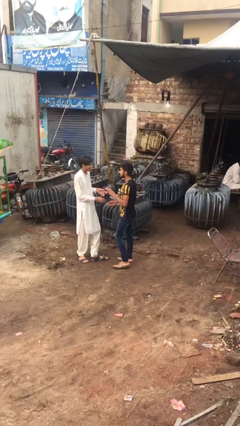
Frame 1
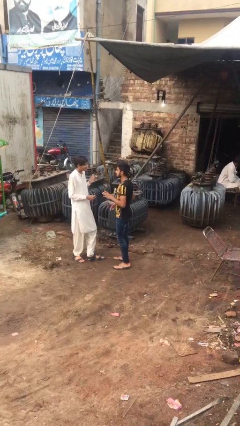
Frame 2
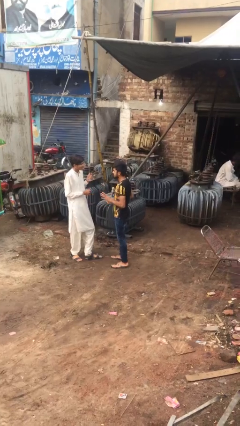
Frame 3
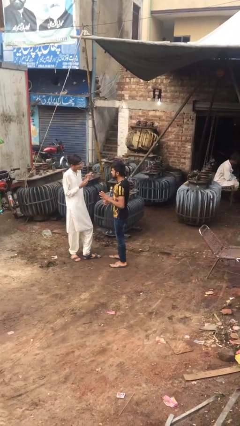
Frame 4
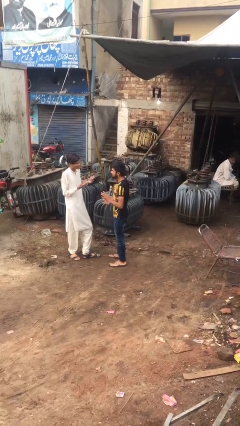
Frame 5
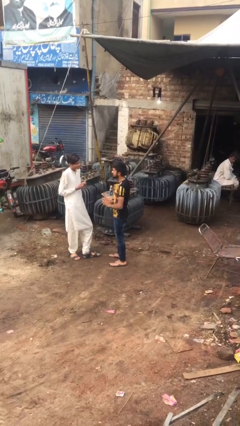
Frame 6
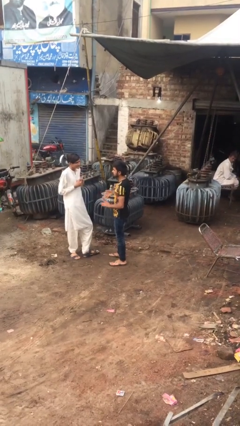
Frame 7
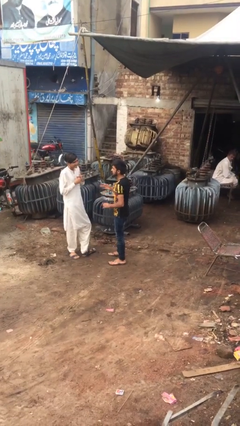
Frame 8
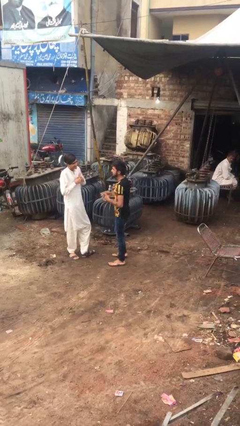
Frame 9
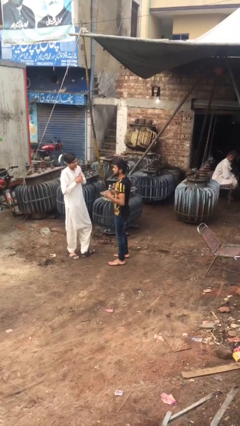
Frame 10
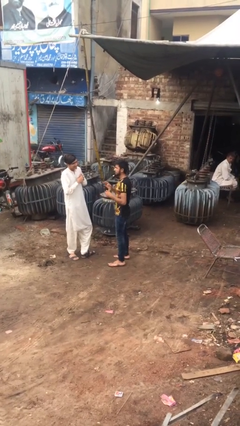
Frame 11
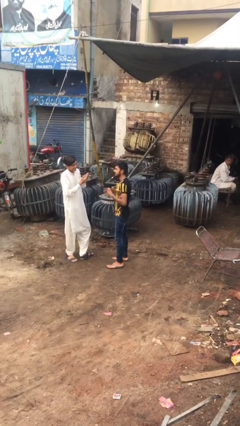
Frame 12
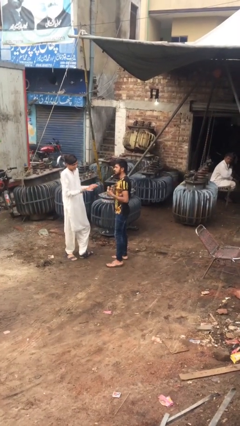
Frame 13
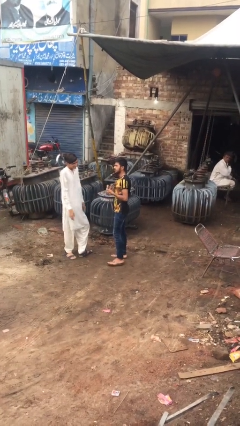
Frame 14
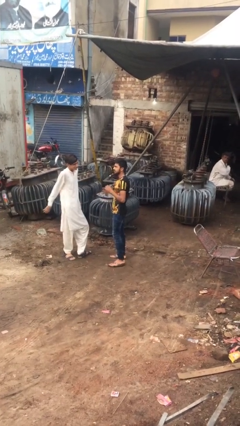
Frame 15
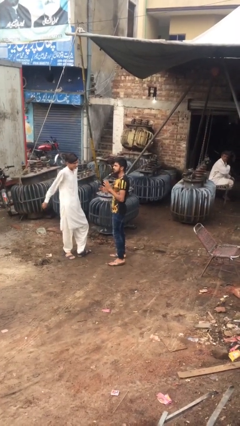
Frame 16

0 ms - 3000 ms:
person talks to person

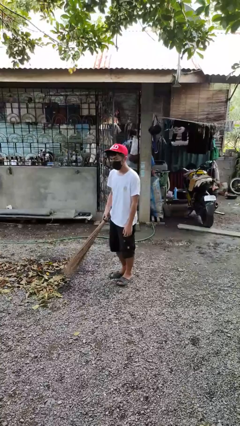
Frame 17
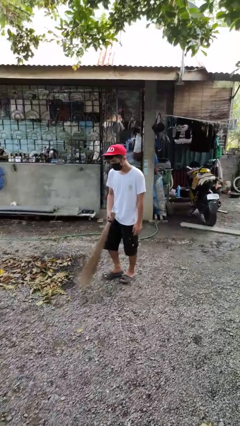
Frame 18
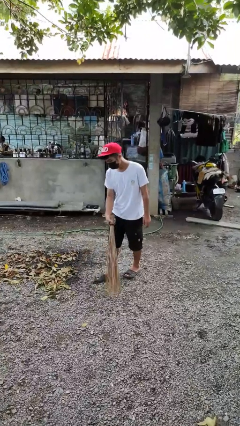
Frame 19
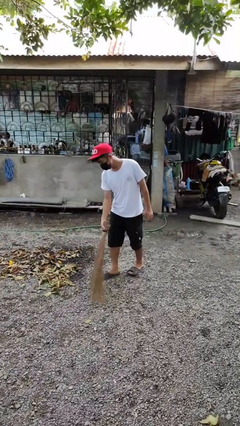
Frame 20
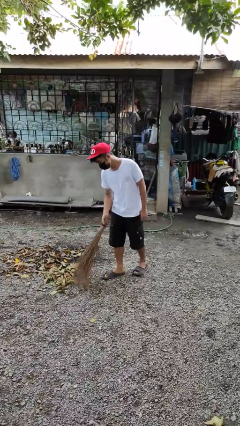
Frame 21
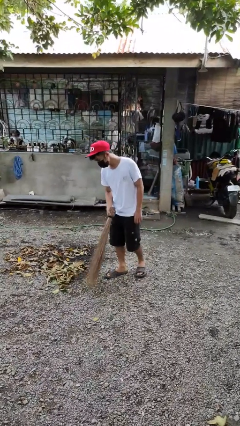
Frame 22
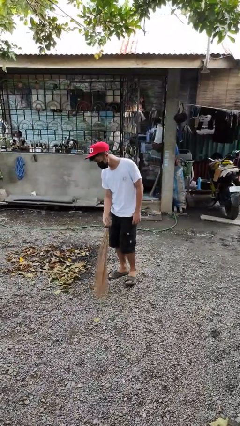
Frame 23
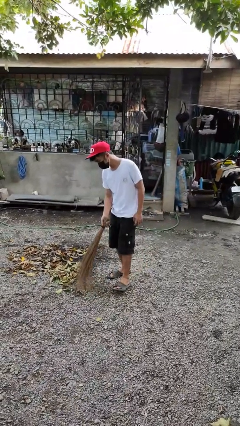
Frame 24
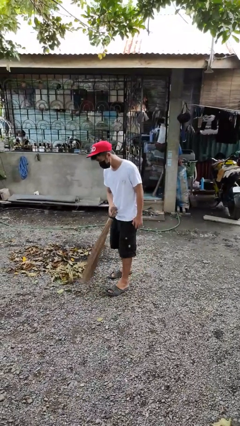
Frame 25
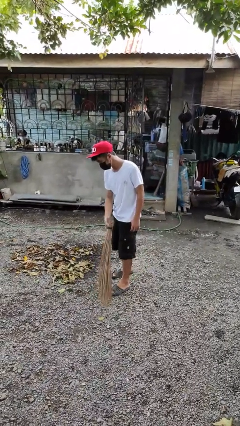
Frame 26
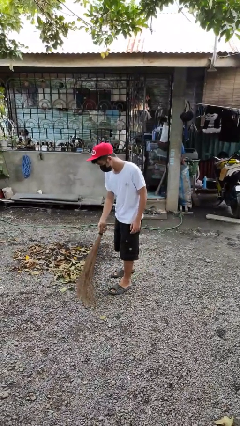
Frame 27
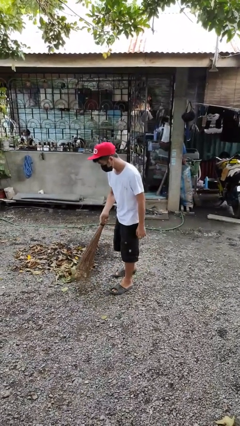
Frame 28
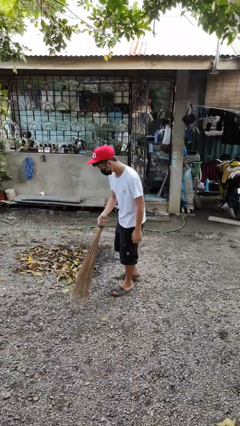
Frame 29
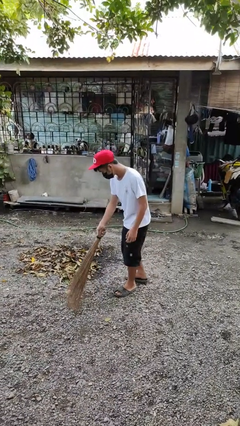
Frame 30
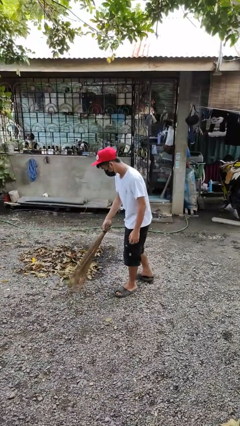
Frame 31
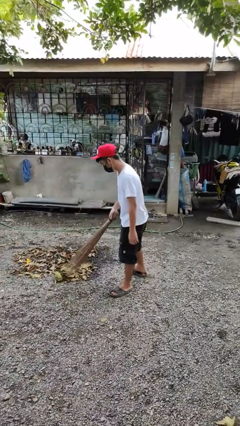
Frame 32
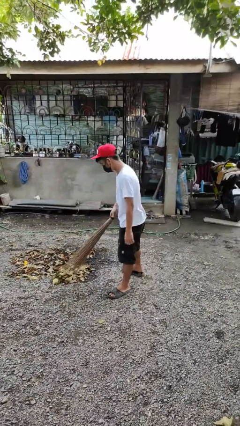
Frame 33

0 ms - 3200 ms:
person sweeps floor

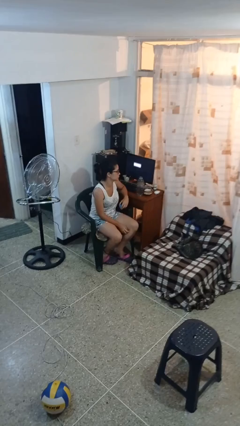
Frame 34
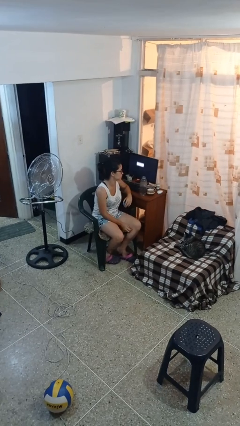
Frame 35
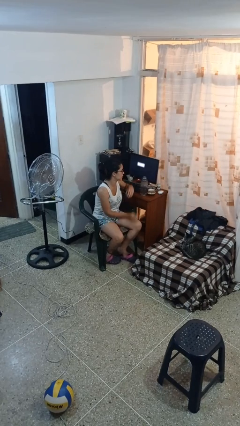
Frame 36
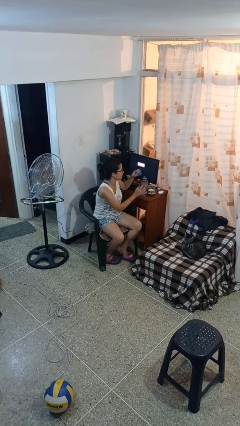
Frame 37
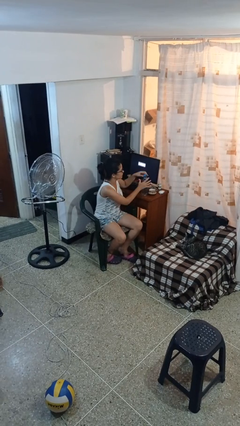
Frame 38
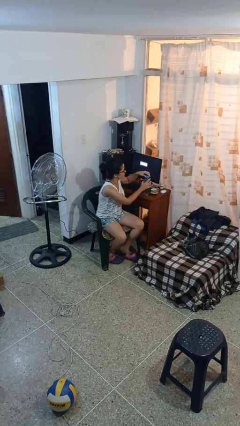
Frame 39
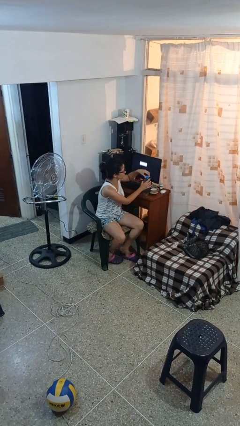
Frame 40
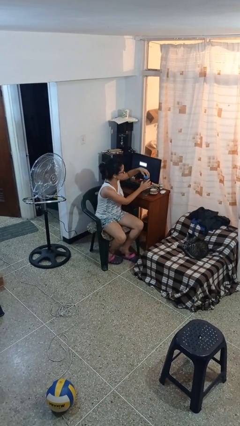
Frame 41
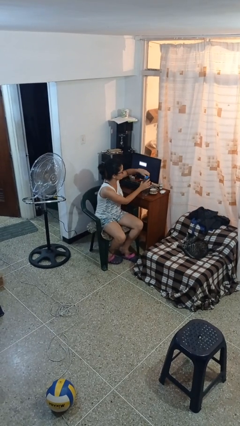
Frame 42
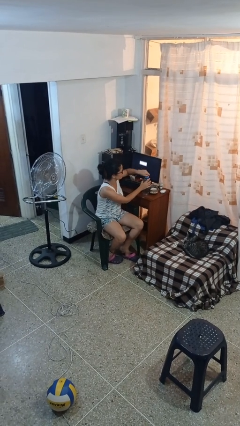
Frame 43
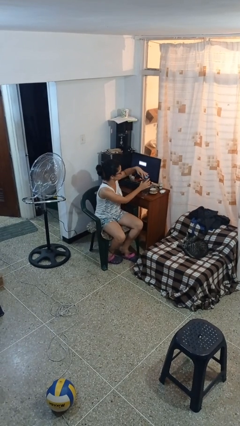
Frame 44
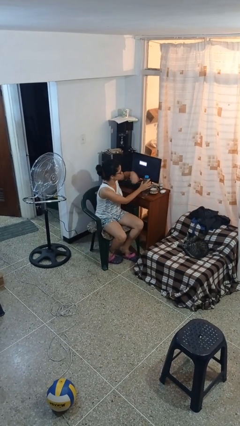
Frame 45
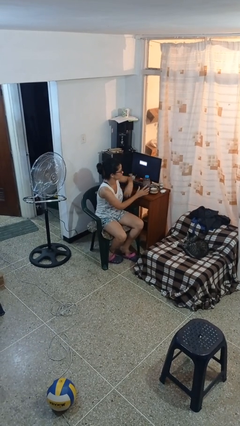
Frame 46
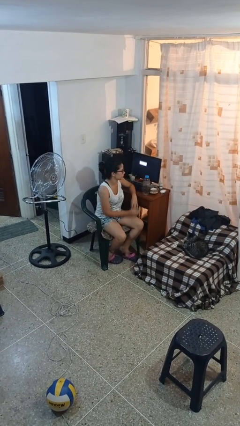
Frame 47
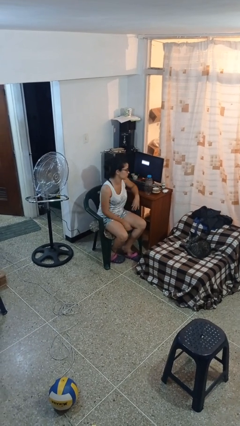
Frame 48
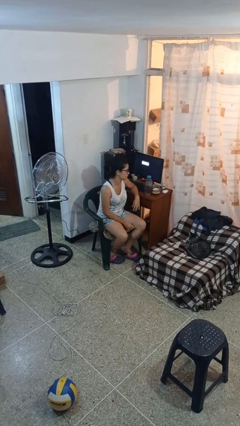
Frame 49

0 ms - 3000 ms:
person screws lid to bottle

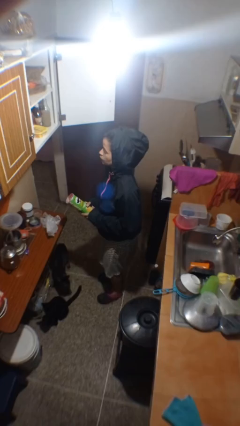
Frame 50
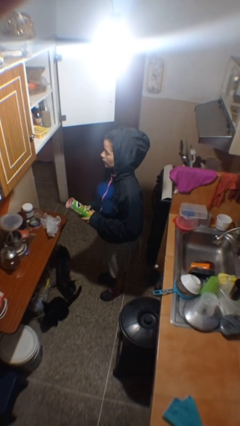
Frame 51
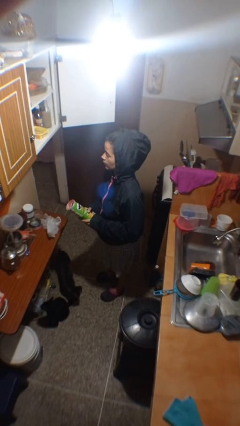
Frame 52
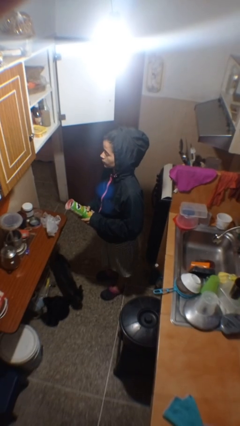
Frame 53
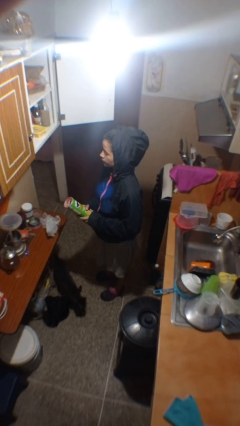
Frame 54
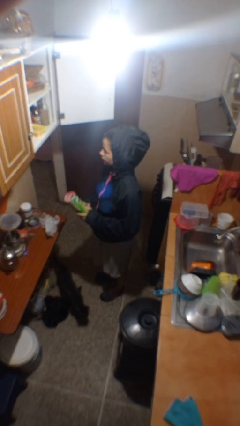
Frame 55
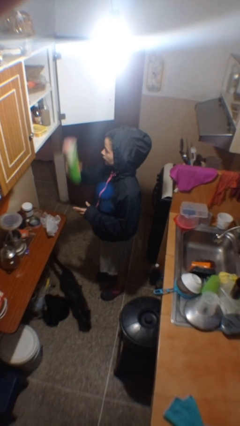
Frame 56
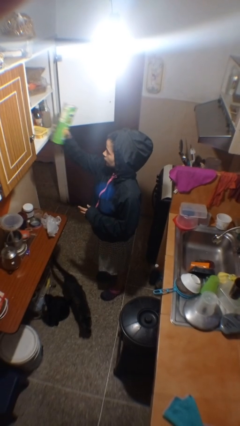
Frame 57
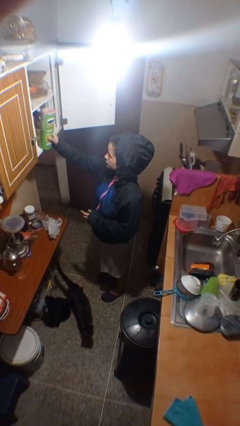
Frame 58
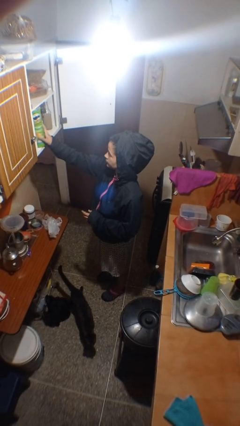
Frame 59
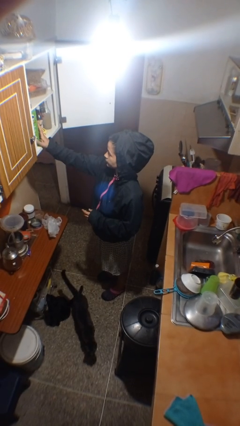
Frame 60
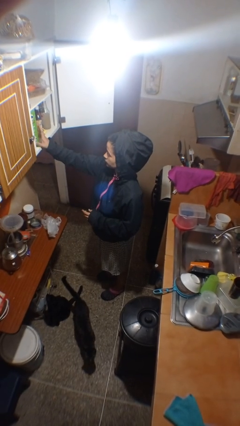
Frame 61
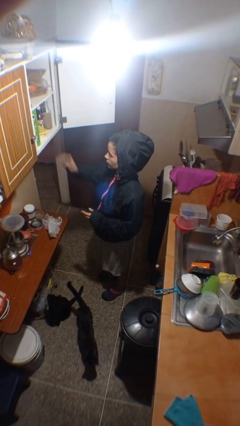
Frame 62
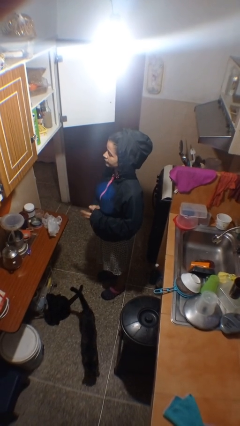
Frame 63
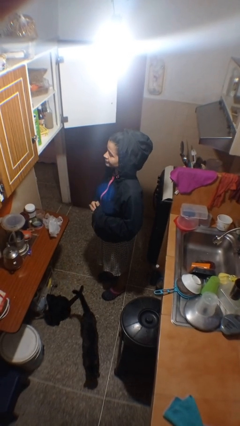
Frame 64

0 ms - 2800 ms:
person puts object in cabinet

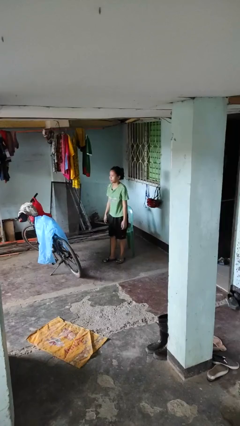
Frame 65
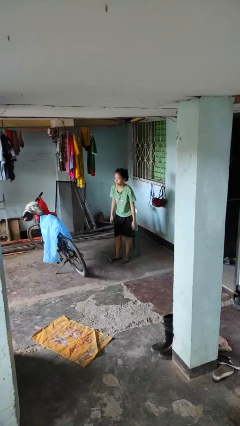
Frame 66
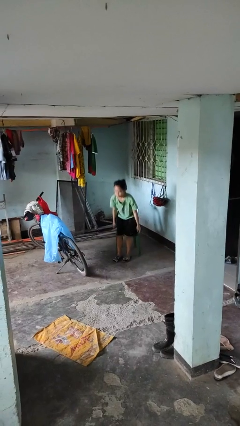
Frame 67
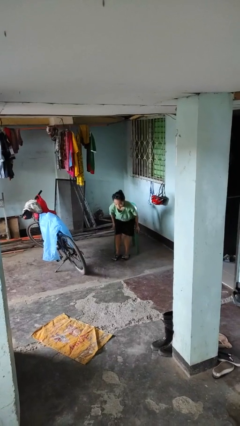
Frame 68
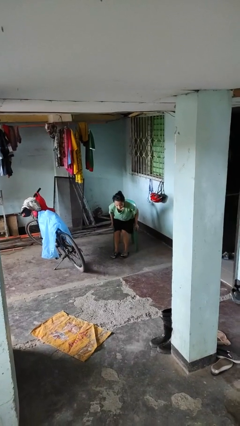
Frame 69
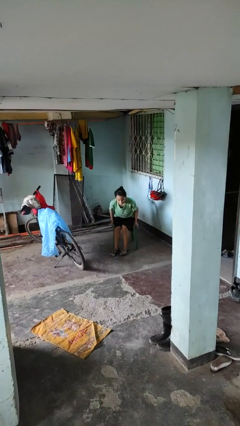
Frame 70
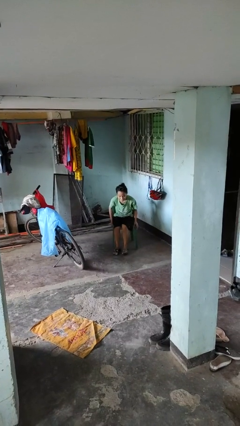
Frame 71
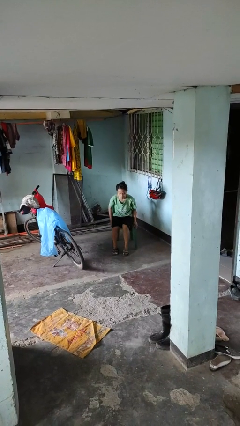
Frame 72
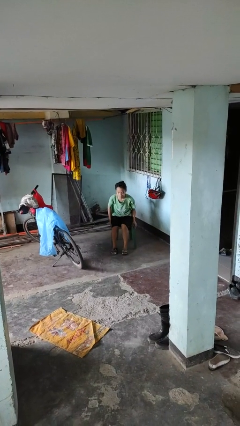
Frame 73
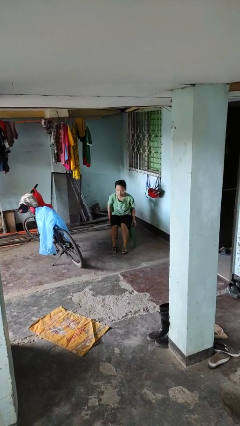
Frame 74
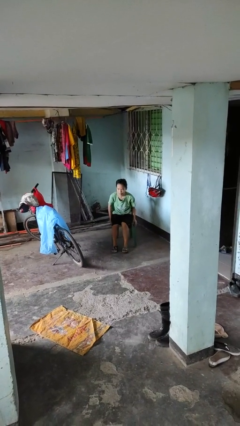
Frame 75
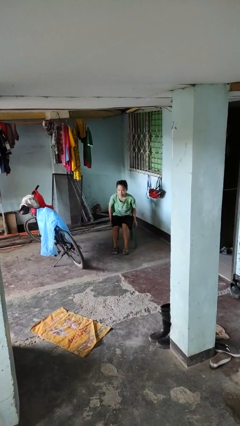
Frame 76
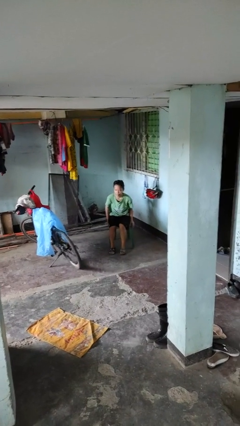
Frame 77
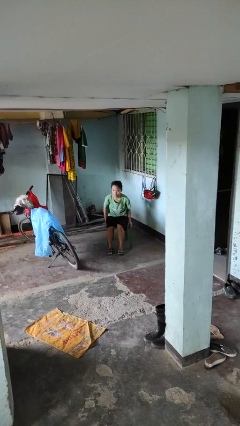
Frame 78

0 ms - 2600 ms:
person sits down

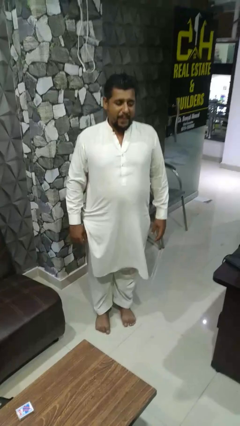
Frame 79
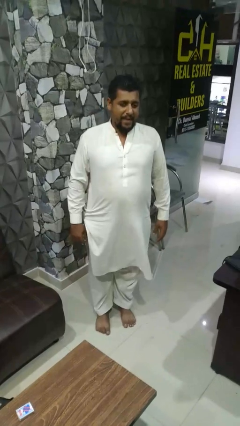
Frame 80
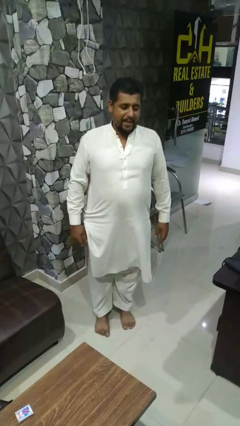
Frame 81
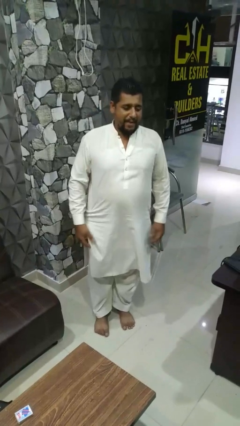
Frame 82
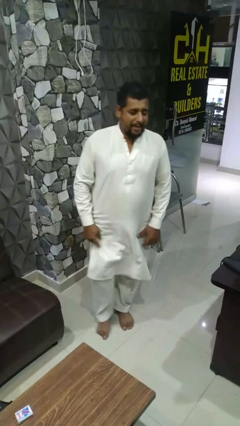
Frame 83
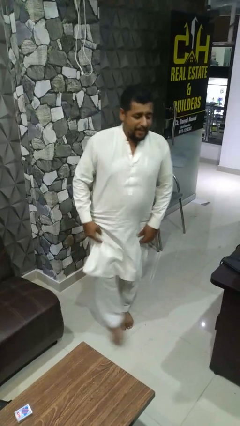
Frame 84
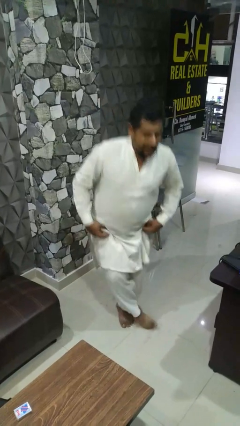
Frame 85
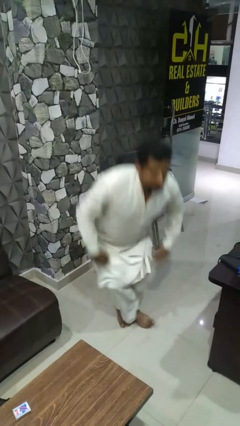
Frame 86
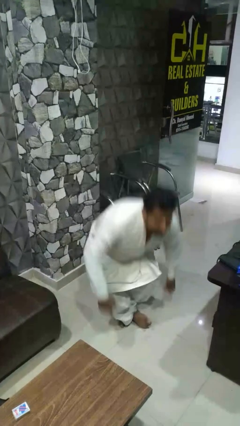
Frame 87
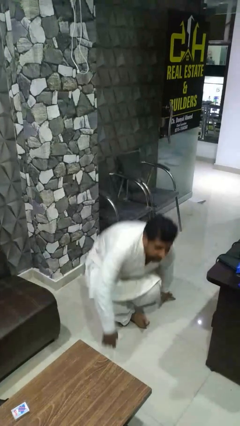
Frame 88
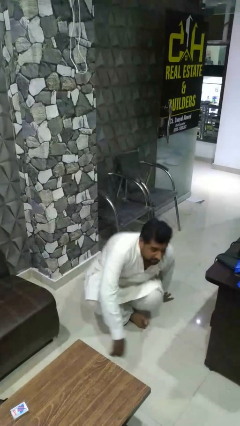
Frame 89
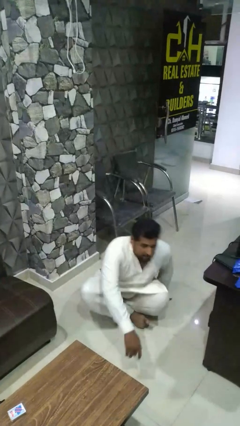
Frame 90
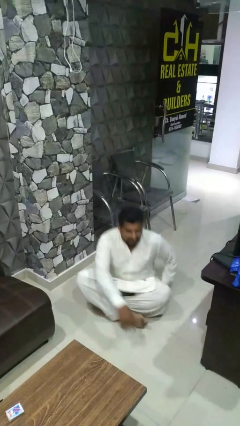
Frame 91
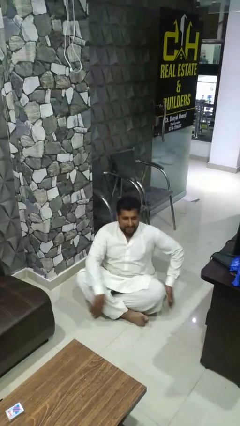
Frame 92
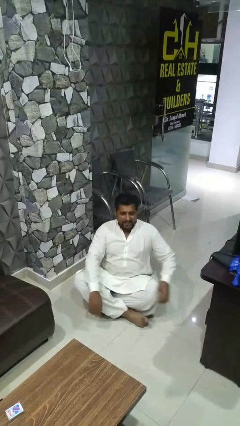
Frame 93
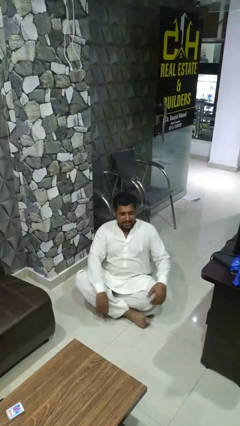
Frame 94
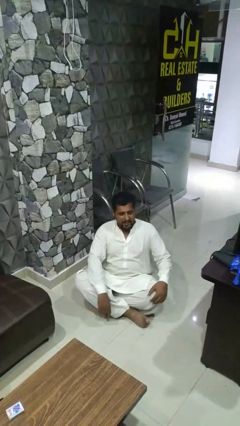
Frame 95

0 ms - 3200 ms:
person sits crisscross
